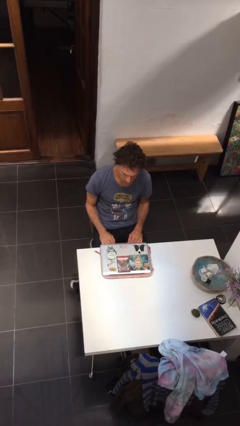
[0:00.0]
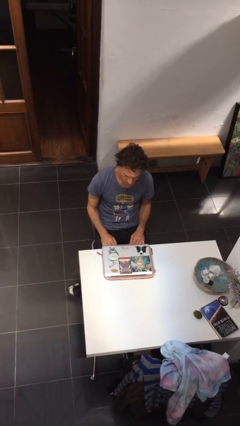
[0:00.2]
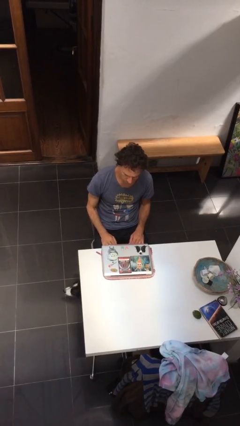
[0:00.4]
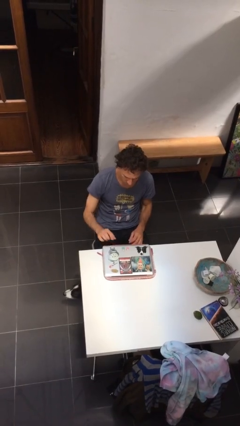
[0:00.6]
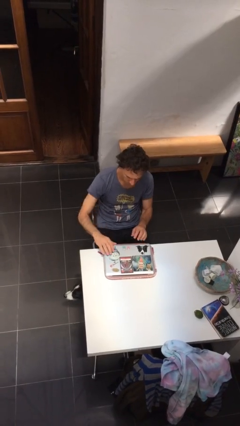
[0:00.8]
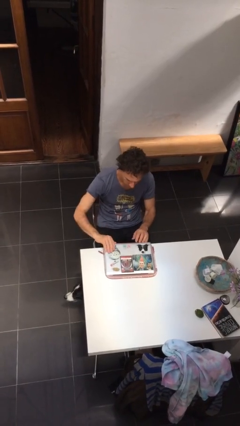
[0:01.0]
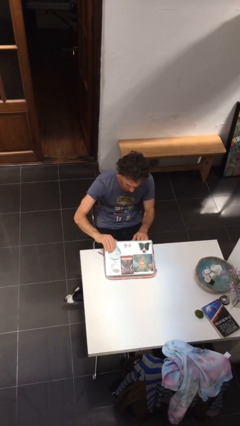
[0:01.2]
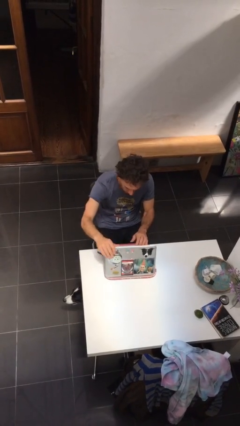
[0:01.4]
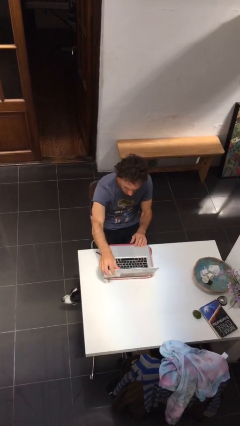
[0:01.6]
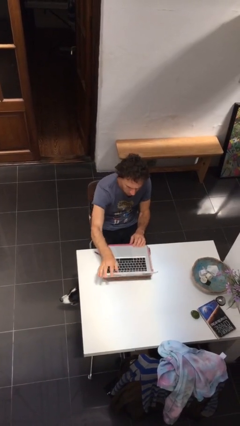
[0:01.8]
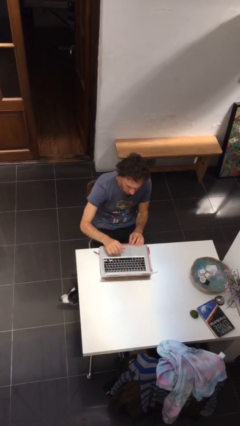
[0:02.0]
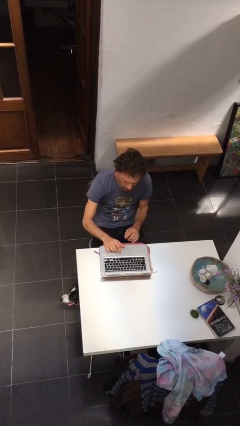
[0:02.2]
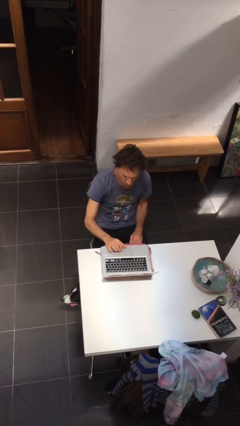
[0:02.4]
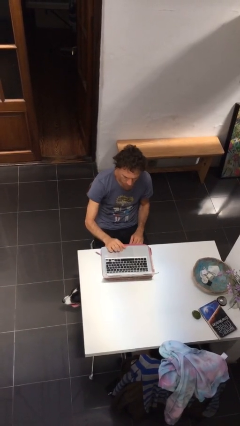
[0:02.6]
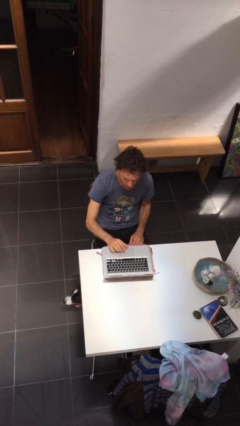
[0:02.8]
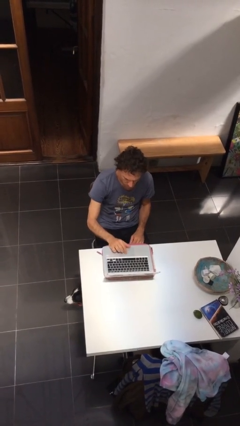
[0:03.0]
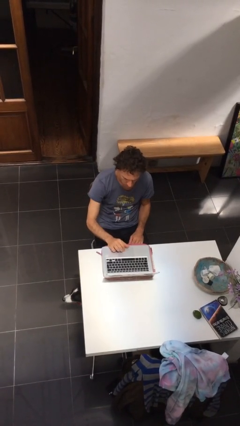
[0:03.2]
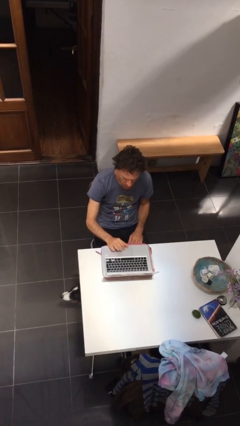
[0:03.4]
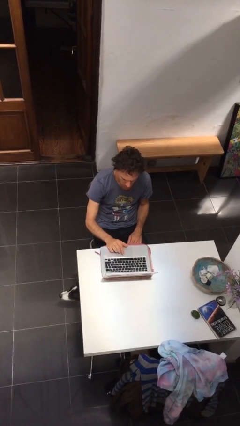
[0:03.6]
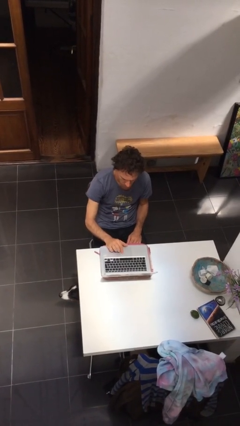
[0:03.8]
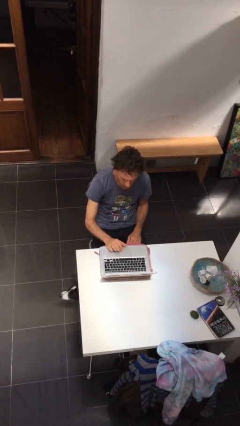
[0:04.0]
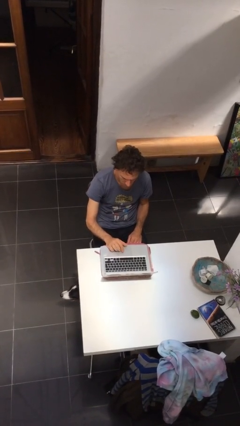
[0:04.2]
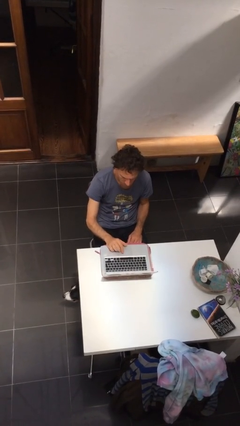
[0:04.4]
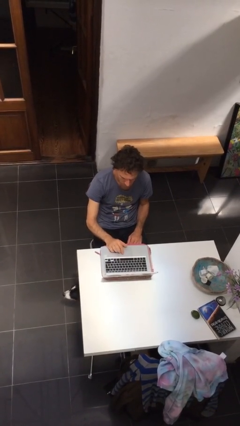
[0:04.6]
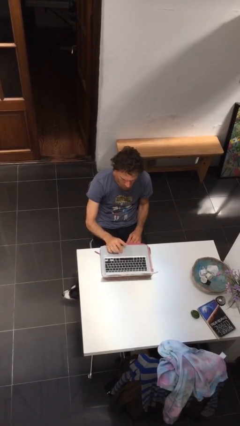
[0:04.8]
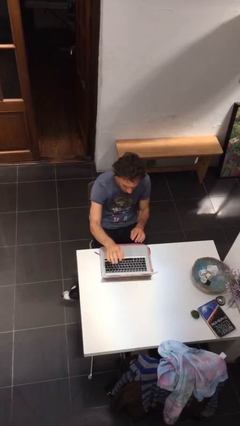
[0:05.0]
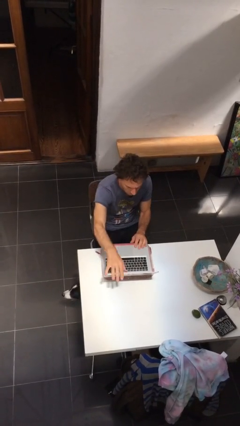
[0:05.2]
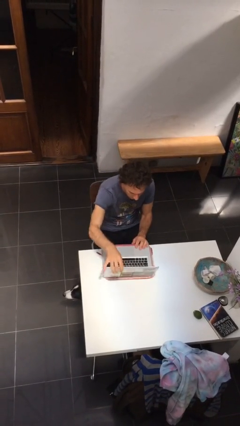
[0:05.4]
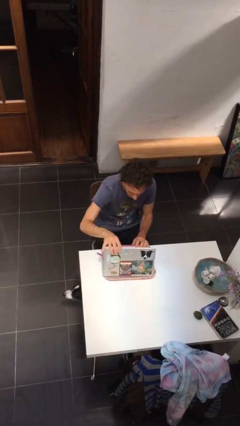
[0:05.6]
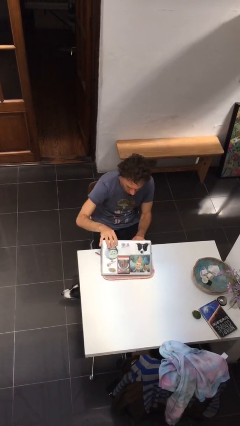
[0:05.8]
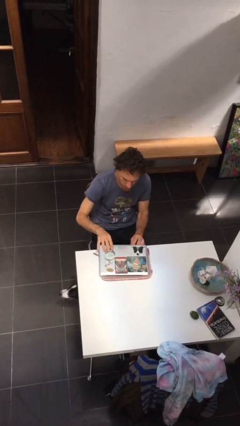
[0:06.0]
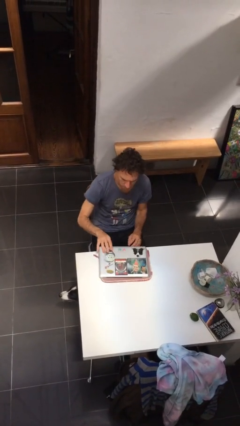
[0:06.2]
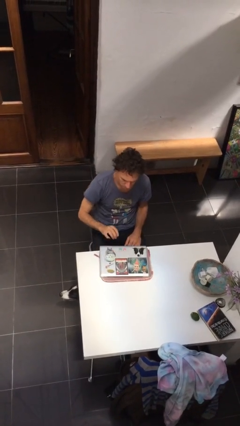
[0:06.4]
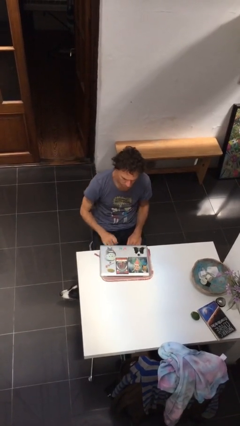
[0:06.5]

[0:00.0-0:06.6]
person interacts with laptop

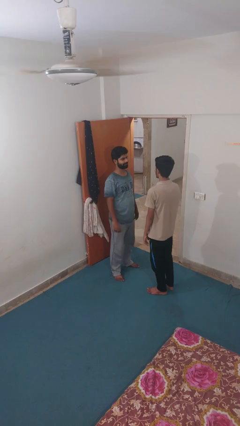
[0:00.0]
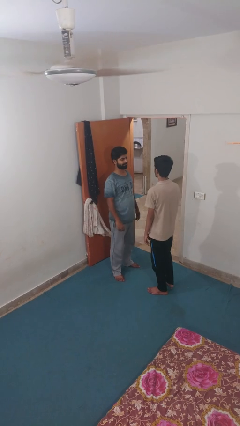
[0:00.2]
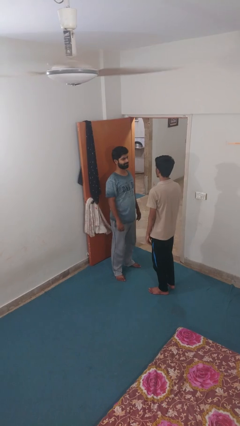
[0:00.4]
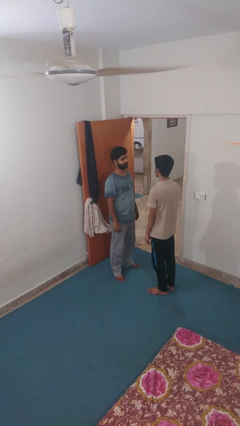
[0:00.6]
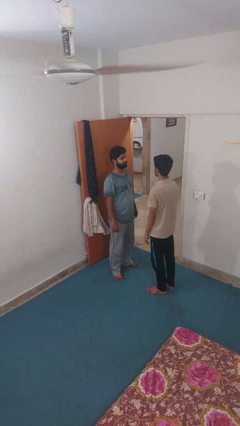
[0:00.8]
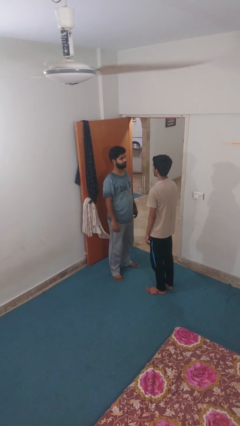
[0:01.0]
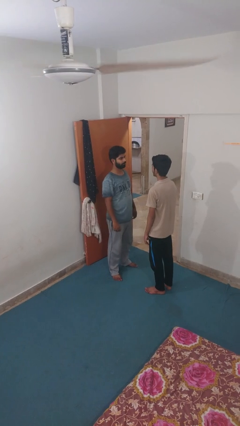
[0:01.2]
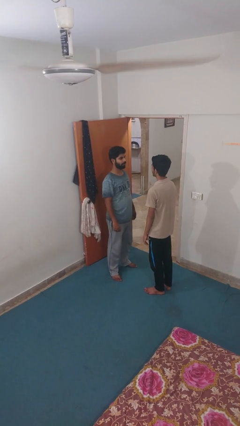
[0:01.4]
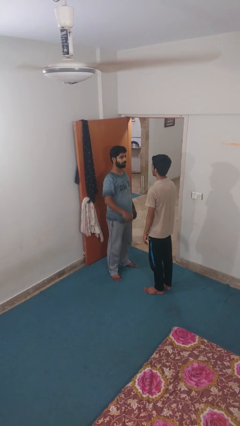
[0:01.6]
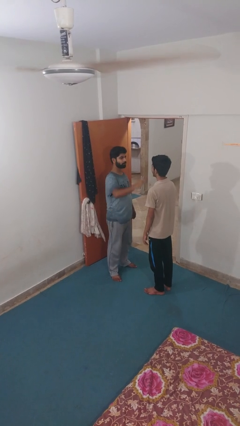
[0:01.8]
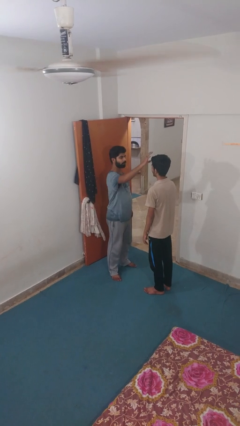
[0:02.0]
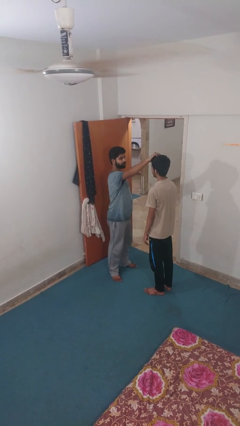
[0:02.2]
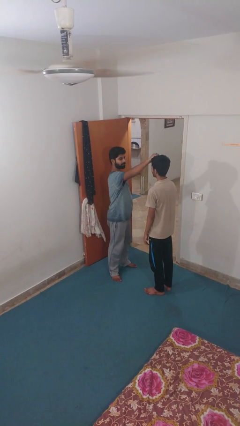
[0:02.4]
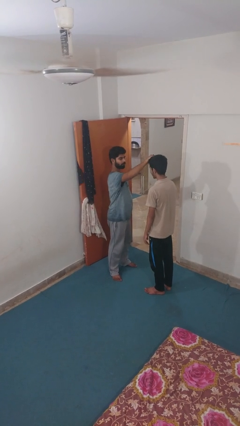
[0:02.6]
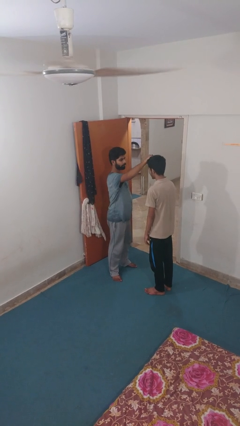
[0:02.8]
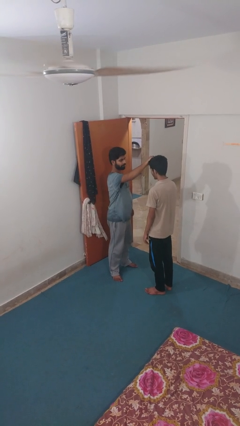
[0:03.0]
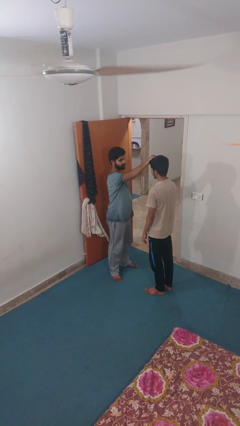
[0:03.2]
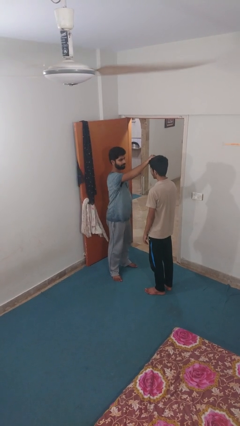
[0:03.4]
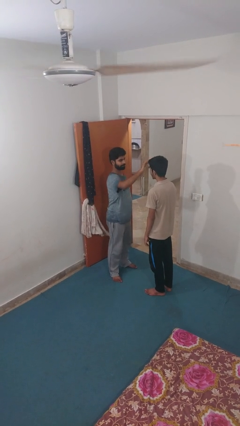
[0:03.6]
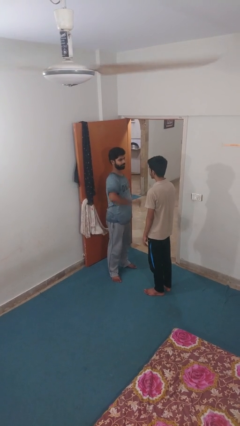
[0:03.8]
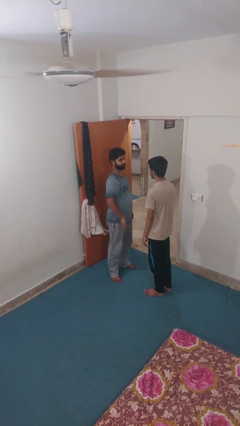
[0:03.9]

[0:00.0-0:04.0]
person grabs person by hair

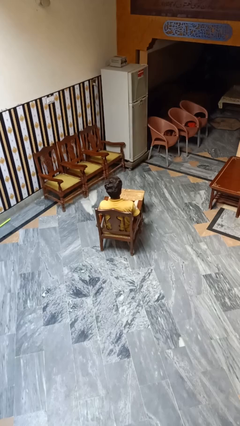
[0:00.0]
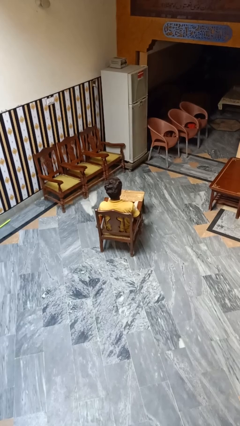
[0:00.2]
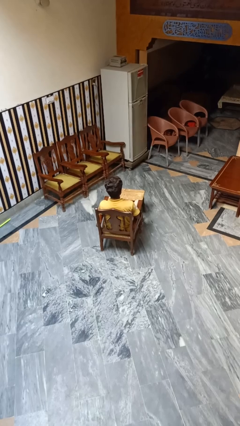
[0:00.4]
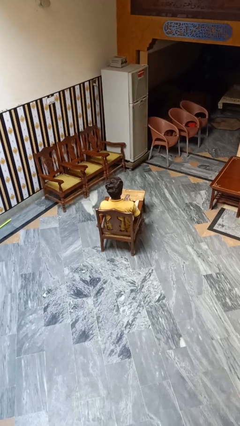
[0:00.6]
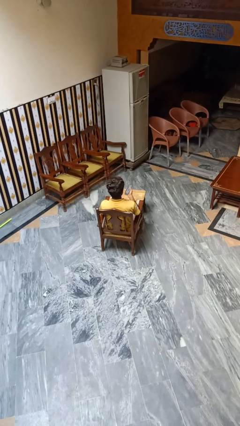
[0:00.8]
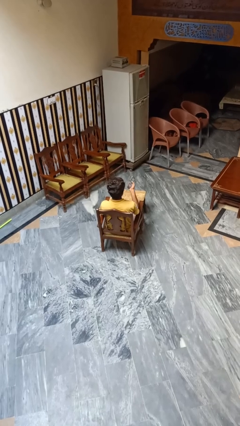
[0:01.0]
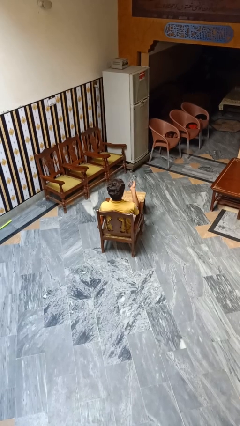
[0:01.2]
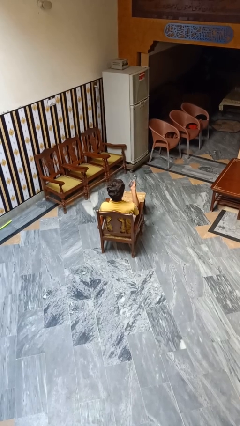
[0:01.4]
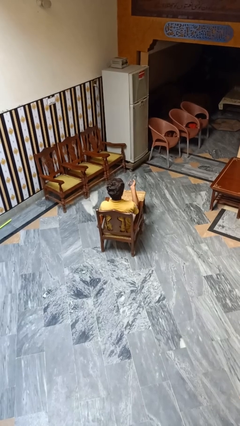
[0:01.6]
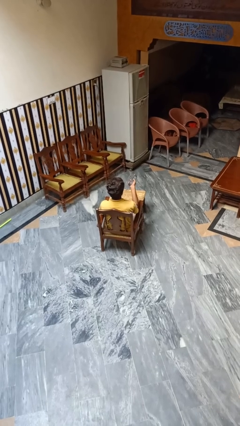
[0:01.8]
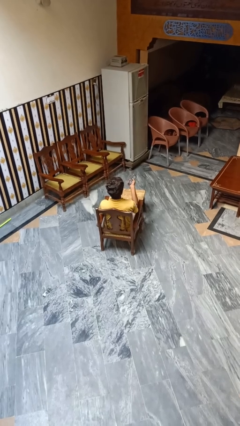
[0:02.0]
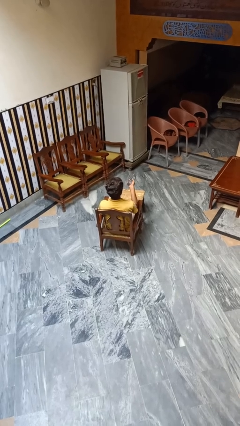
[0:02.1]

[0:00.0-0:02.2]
person uses television remote

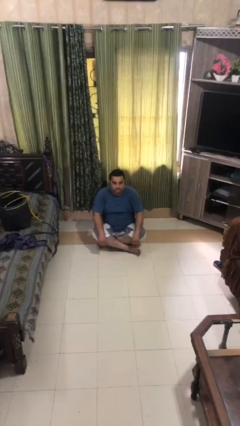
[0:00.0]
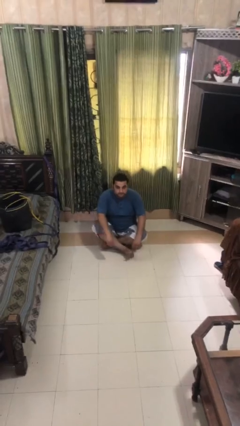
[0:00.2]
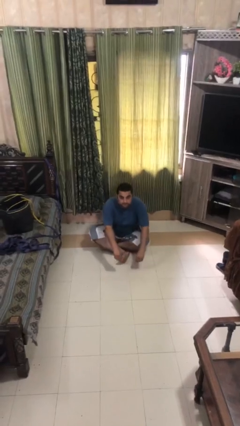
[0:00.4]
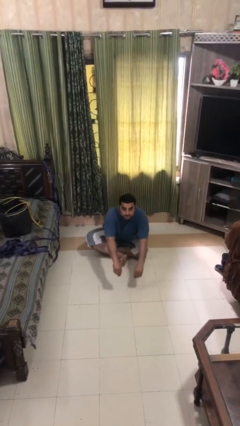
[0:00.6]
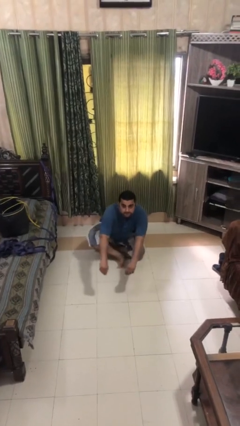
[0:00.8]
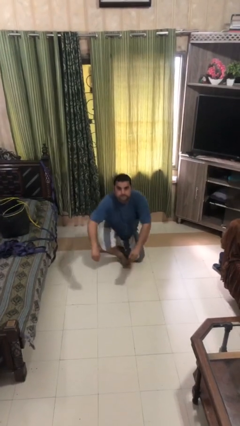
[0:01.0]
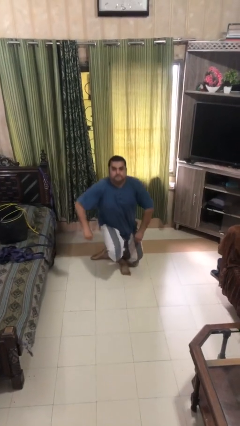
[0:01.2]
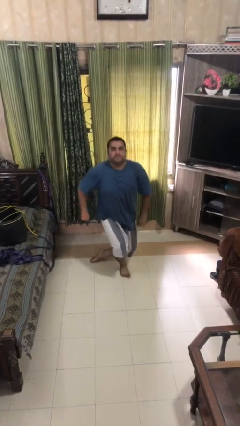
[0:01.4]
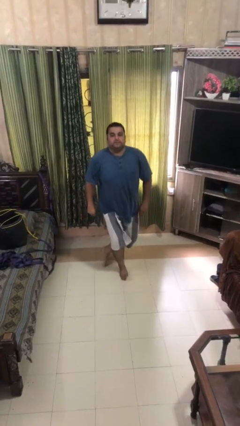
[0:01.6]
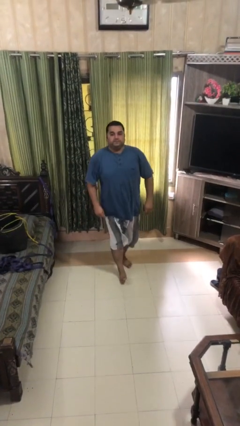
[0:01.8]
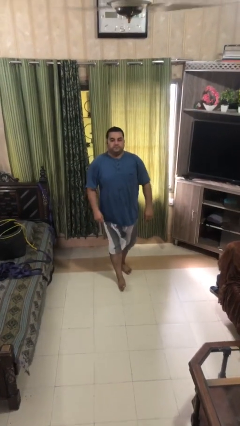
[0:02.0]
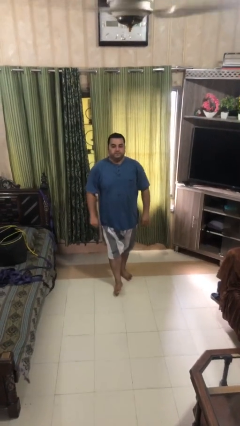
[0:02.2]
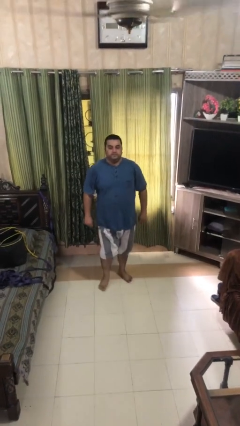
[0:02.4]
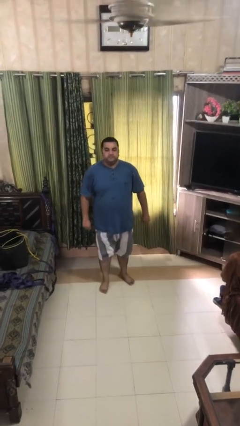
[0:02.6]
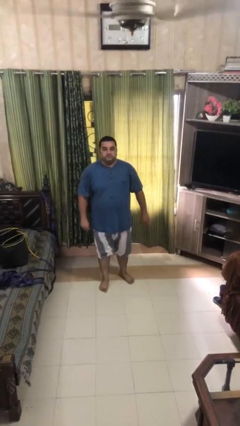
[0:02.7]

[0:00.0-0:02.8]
person stands up from floor

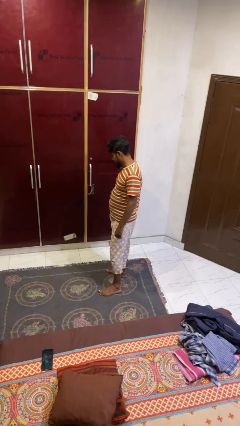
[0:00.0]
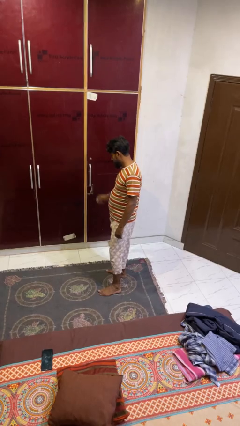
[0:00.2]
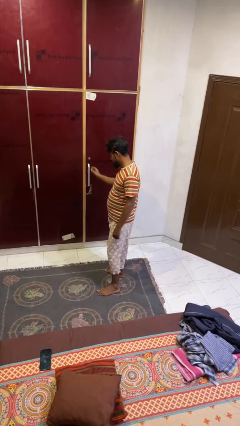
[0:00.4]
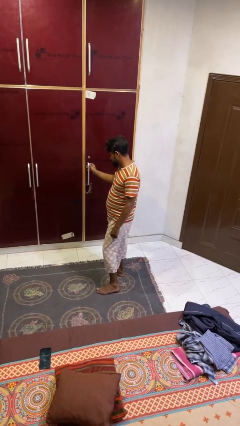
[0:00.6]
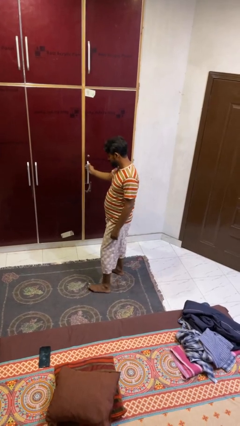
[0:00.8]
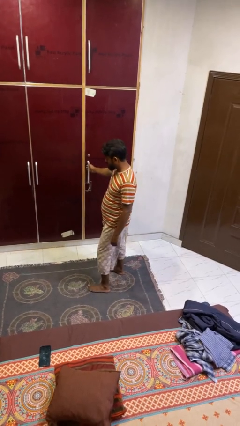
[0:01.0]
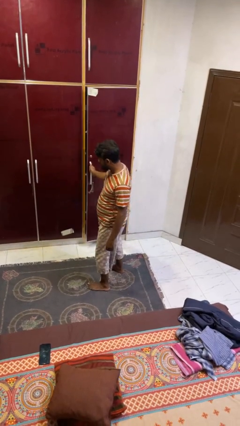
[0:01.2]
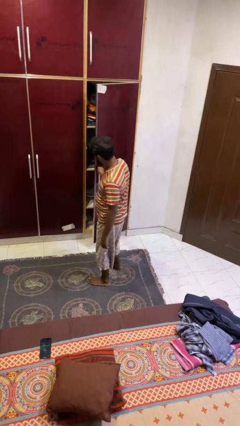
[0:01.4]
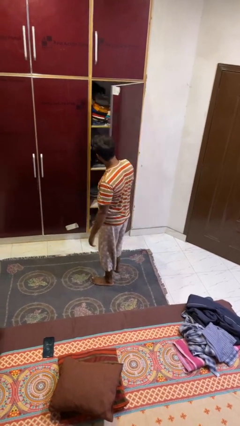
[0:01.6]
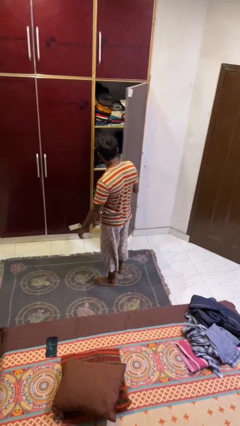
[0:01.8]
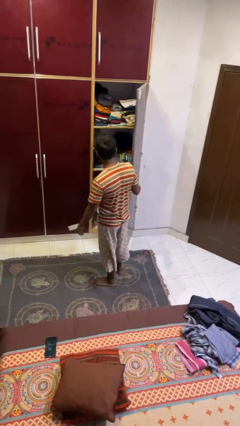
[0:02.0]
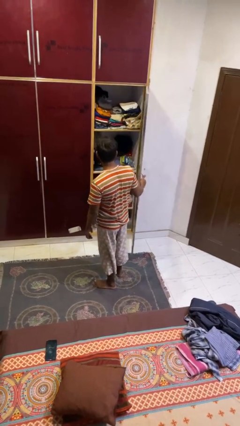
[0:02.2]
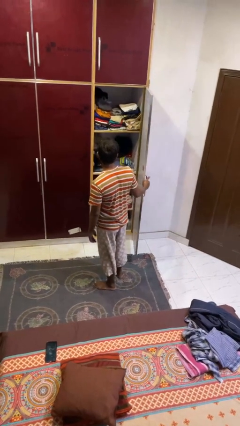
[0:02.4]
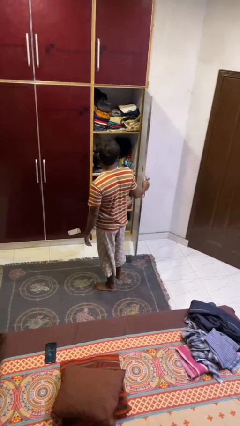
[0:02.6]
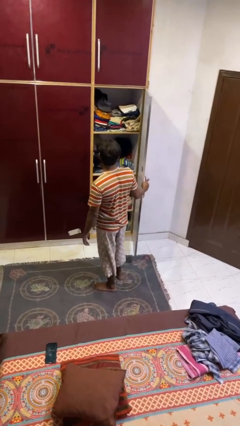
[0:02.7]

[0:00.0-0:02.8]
person opens closet door
